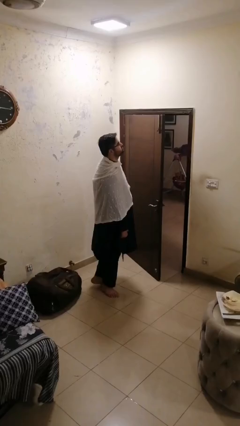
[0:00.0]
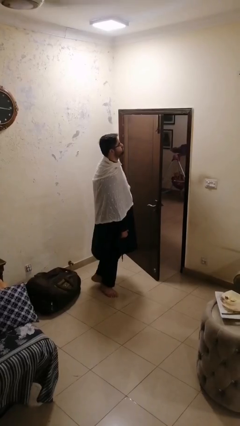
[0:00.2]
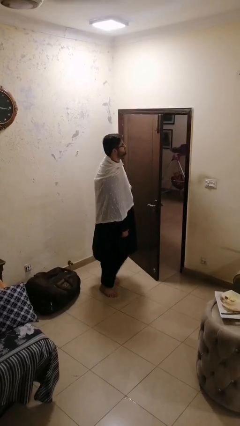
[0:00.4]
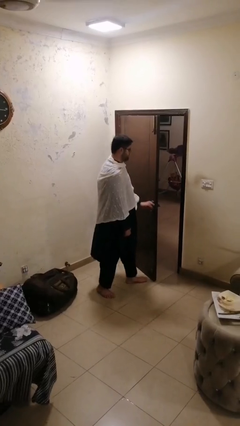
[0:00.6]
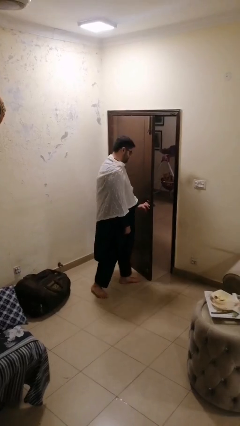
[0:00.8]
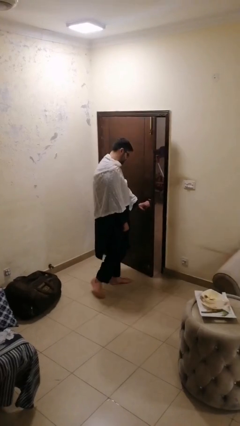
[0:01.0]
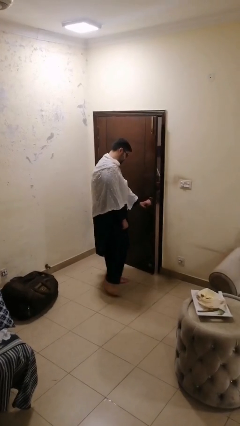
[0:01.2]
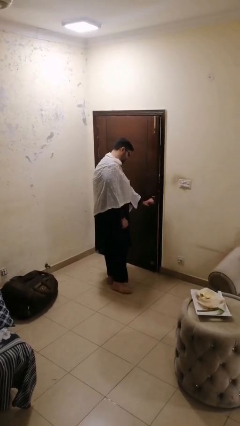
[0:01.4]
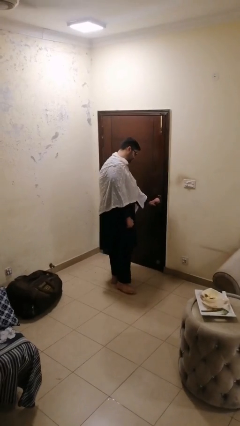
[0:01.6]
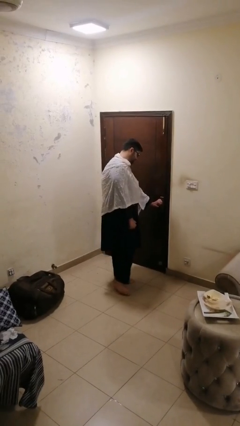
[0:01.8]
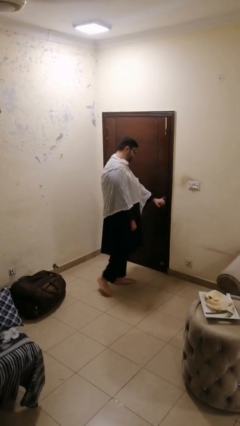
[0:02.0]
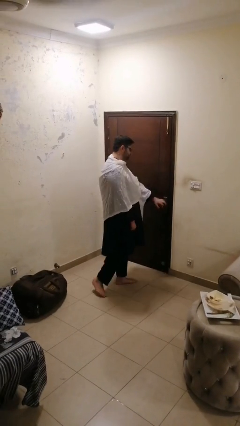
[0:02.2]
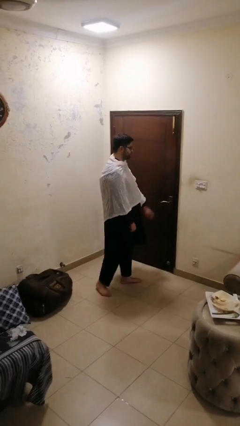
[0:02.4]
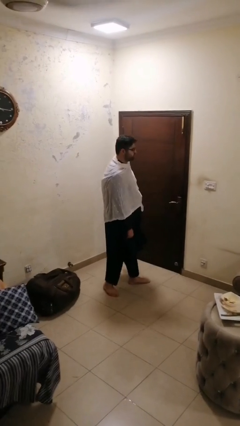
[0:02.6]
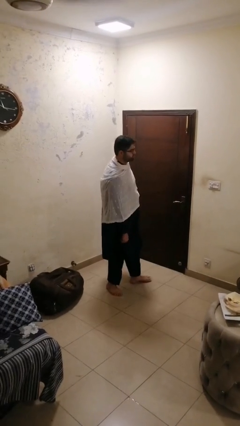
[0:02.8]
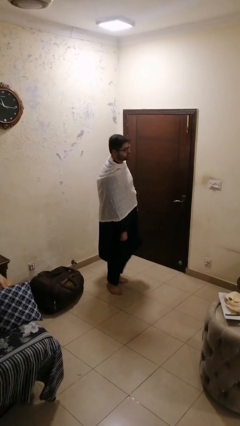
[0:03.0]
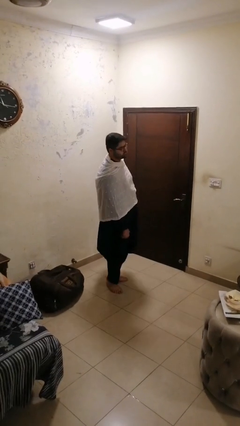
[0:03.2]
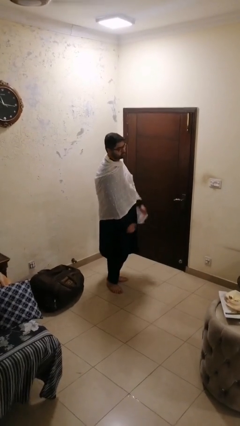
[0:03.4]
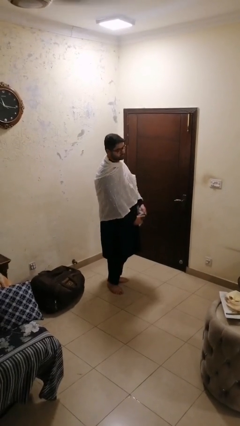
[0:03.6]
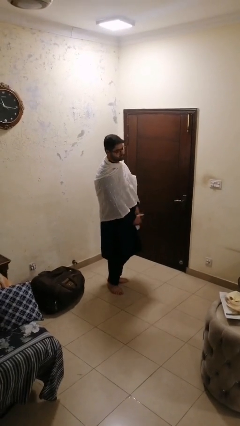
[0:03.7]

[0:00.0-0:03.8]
person closes facility door

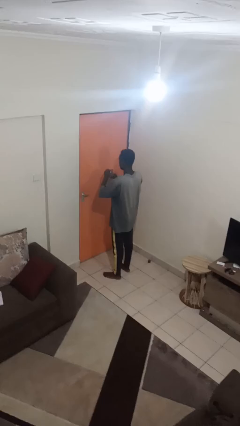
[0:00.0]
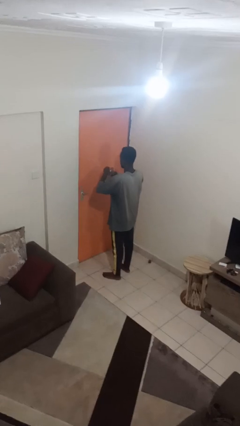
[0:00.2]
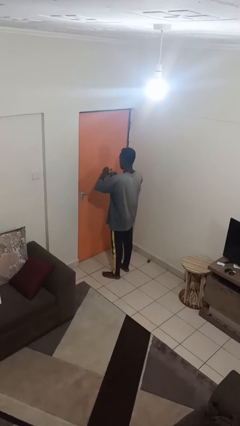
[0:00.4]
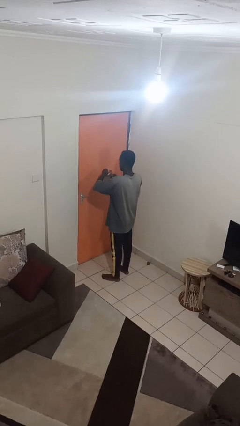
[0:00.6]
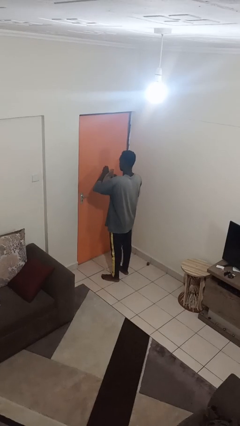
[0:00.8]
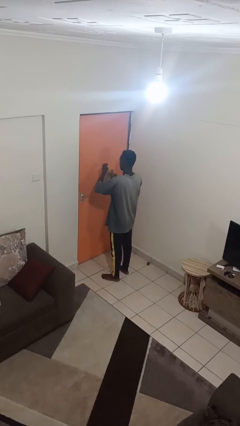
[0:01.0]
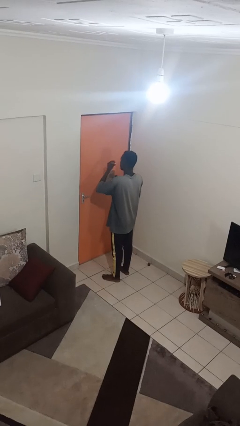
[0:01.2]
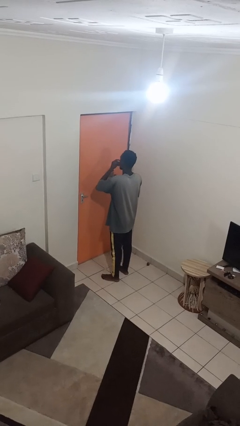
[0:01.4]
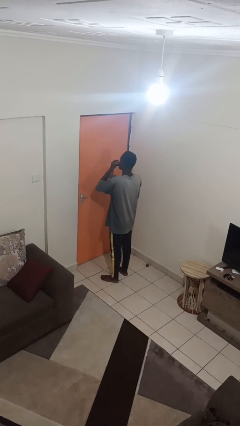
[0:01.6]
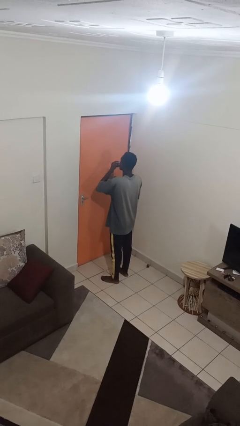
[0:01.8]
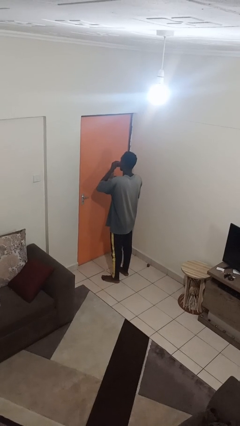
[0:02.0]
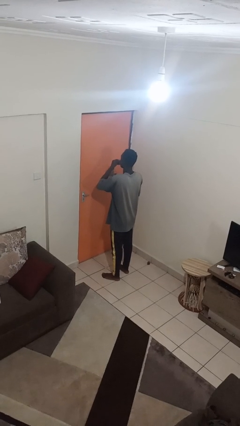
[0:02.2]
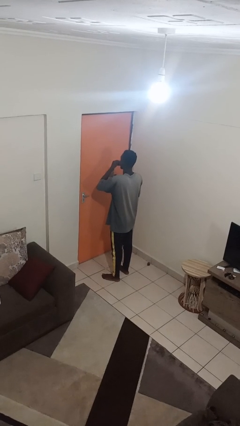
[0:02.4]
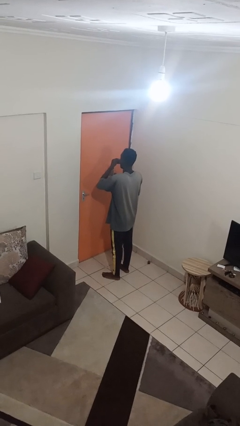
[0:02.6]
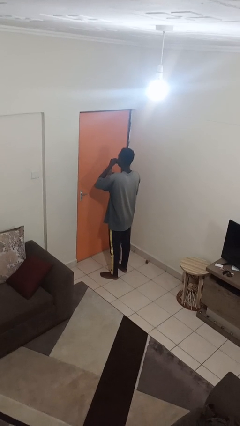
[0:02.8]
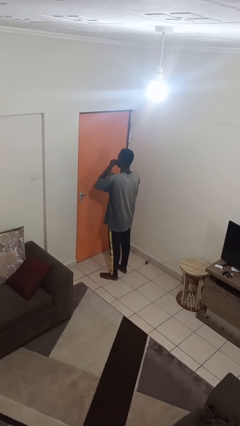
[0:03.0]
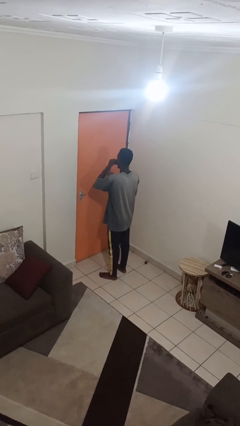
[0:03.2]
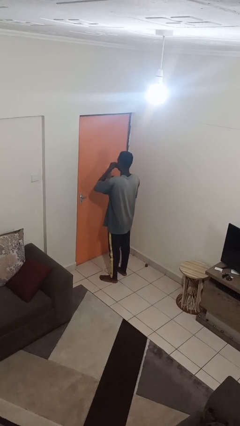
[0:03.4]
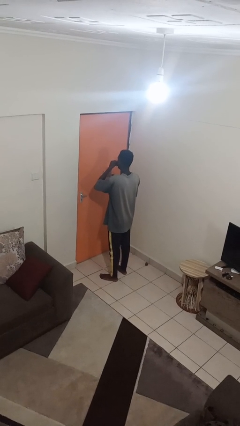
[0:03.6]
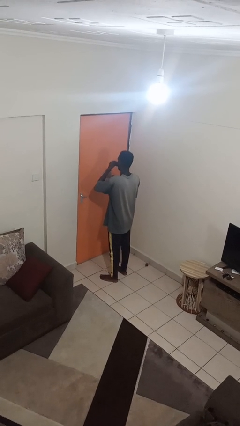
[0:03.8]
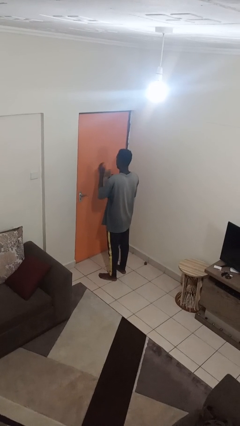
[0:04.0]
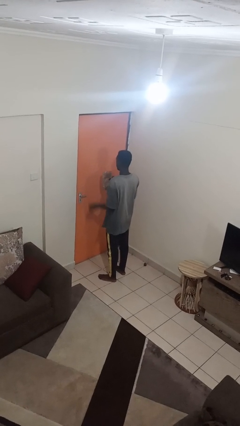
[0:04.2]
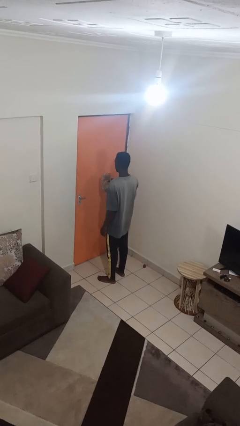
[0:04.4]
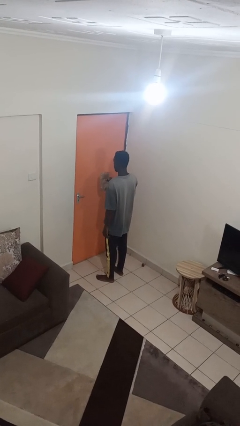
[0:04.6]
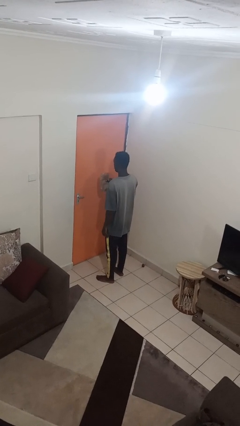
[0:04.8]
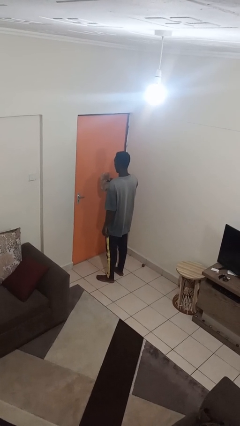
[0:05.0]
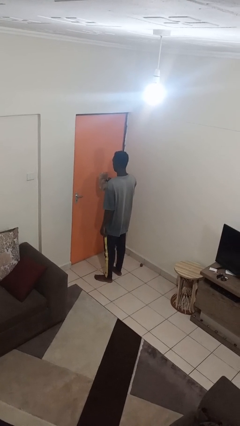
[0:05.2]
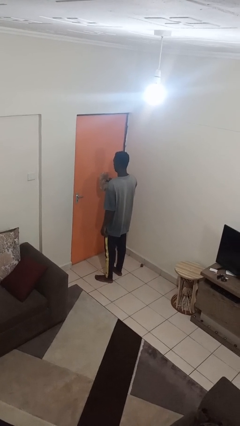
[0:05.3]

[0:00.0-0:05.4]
person eats snack from bag

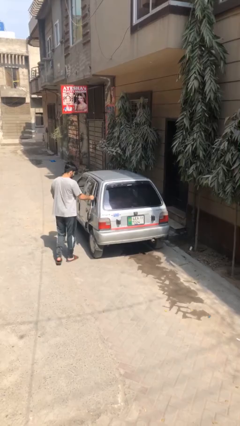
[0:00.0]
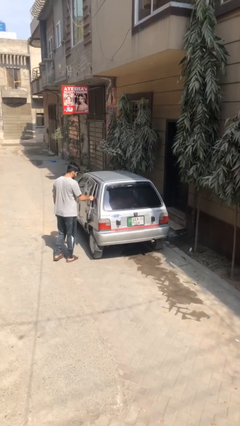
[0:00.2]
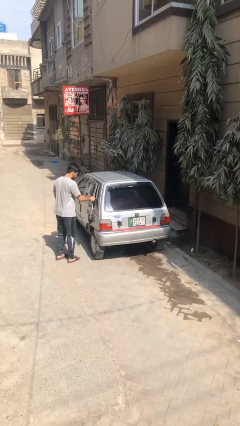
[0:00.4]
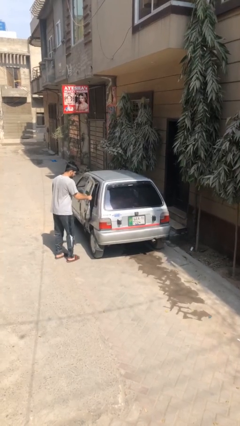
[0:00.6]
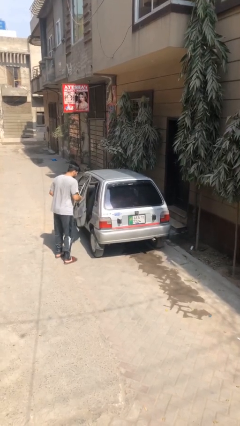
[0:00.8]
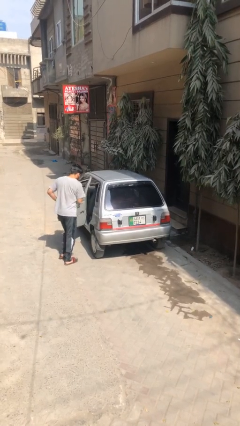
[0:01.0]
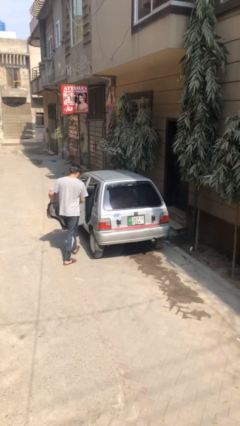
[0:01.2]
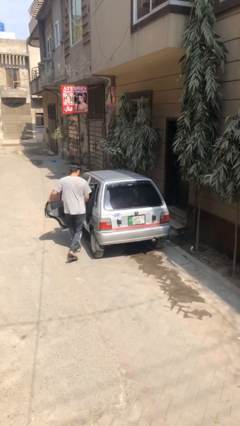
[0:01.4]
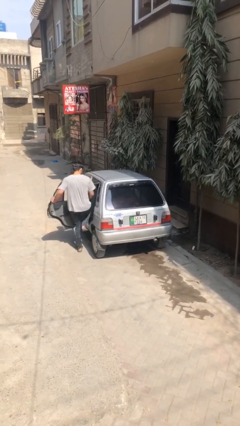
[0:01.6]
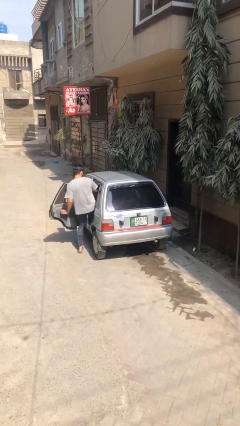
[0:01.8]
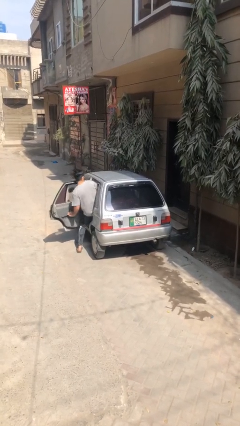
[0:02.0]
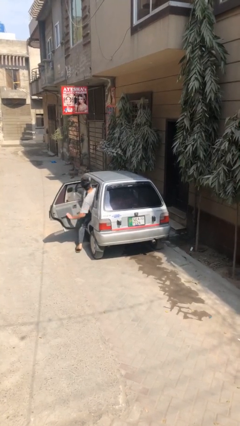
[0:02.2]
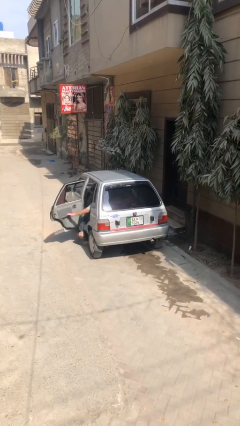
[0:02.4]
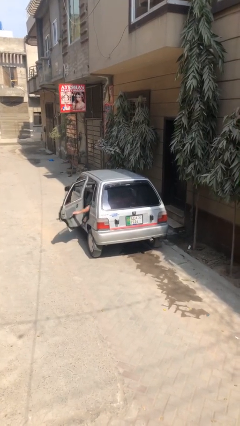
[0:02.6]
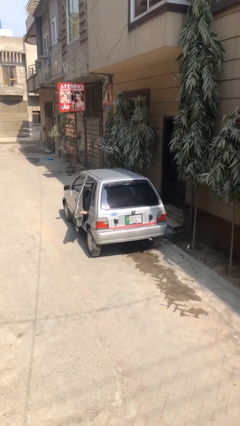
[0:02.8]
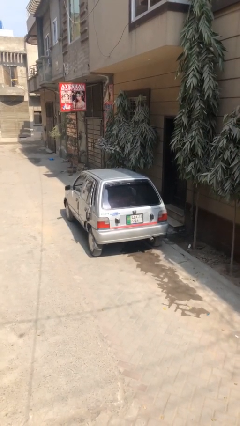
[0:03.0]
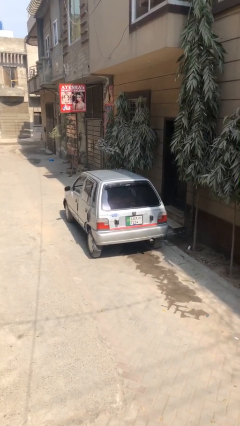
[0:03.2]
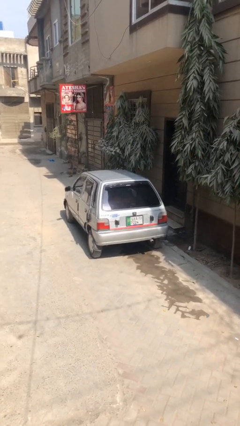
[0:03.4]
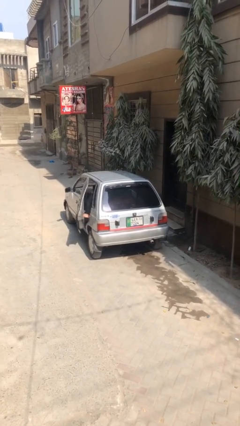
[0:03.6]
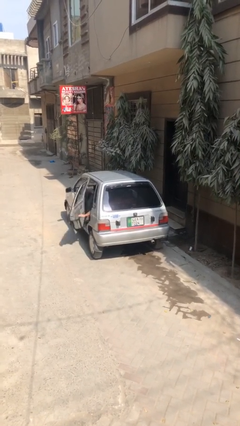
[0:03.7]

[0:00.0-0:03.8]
car picks up person

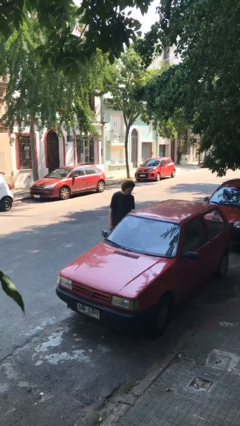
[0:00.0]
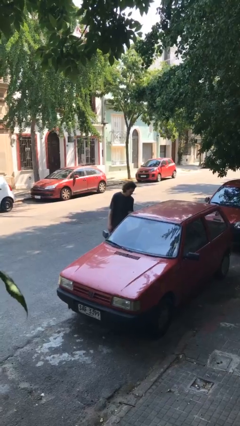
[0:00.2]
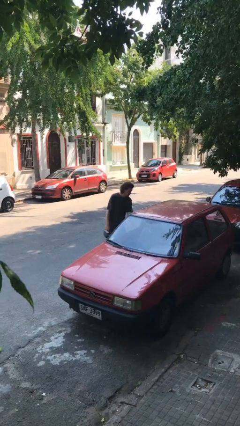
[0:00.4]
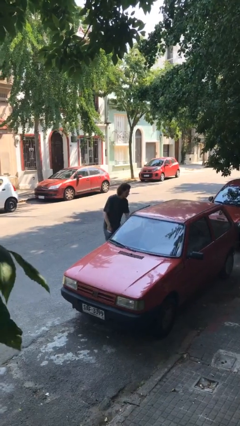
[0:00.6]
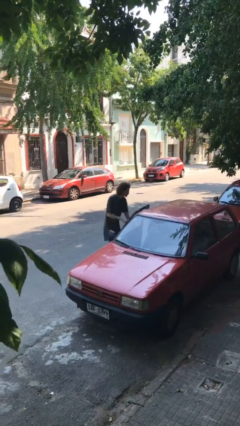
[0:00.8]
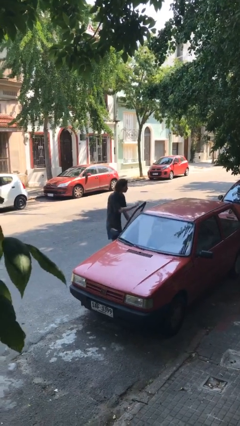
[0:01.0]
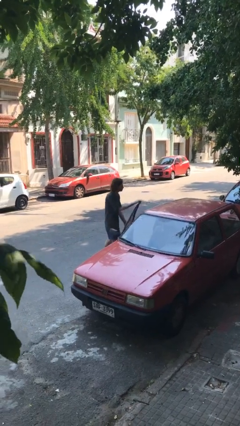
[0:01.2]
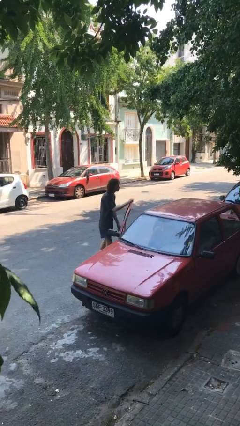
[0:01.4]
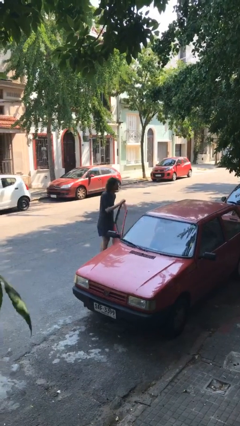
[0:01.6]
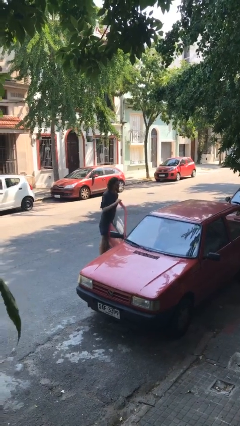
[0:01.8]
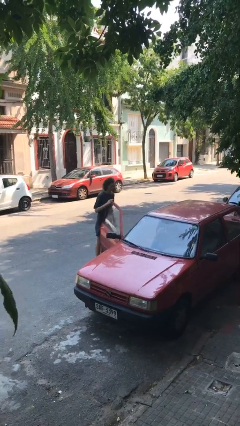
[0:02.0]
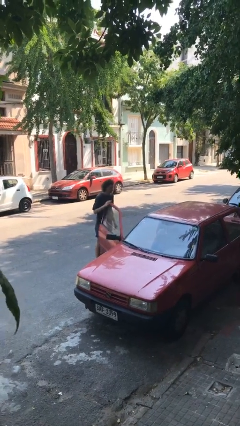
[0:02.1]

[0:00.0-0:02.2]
person opens car door

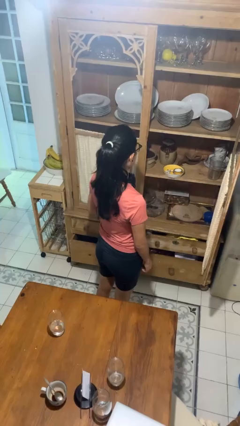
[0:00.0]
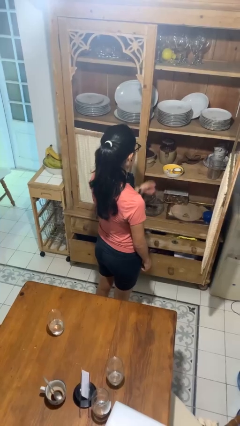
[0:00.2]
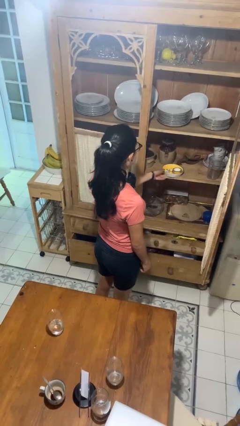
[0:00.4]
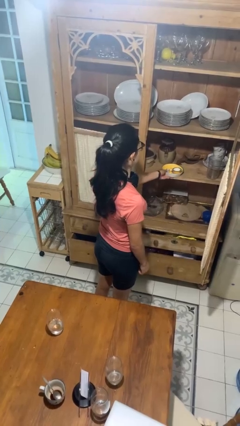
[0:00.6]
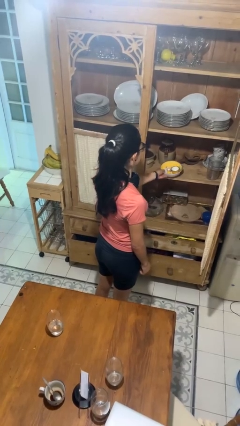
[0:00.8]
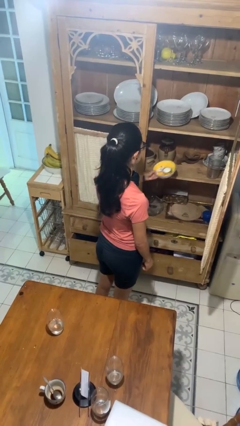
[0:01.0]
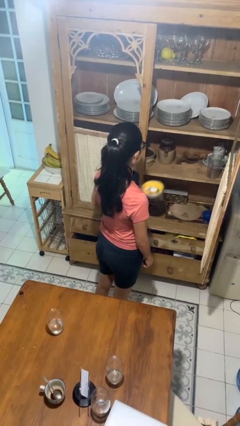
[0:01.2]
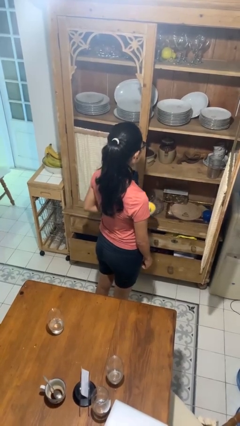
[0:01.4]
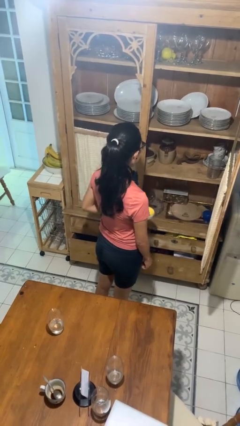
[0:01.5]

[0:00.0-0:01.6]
person takes object from cabinet

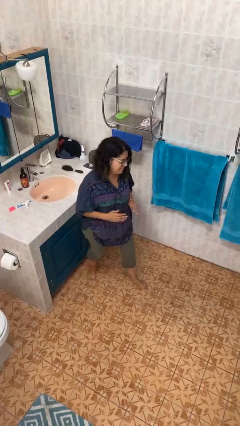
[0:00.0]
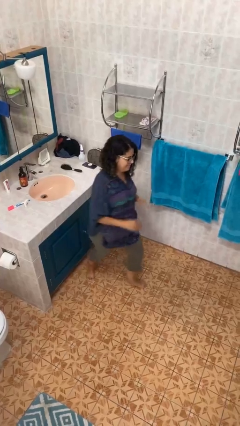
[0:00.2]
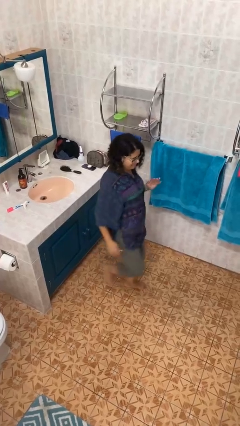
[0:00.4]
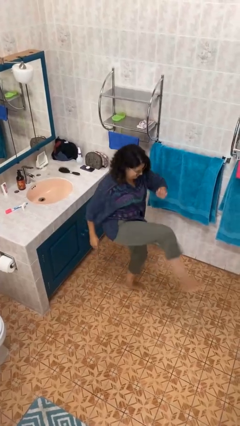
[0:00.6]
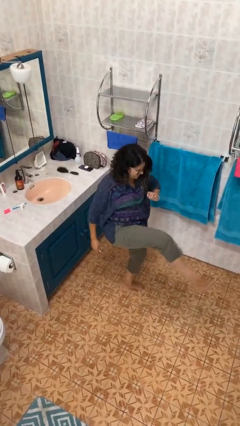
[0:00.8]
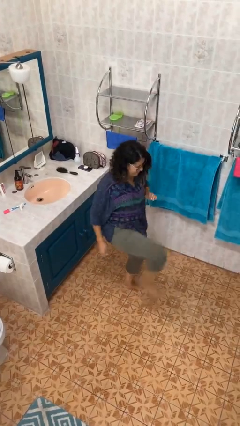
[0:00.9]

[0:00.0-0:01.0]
person karate kicks
